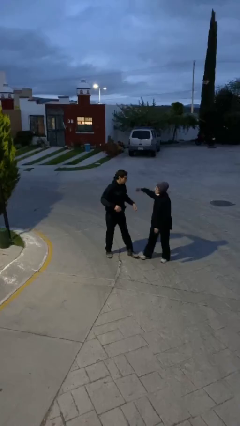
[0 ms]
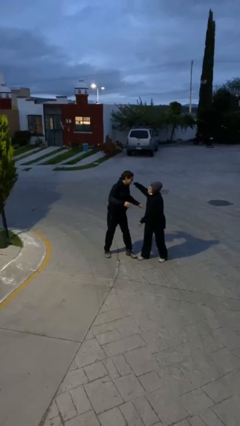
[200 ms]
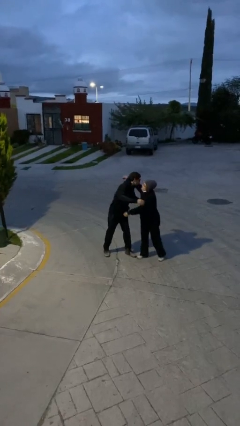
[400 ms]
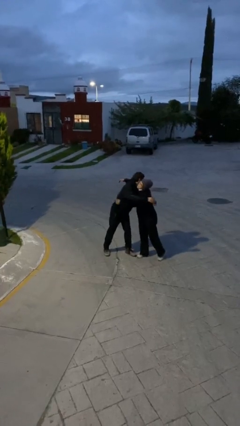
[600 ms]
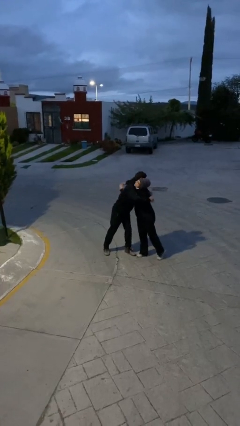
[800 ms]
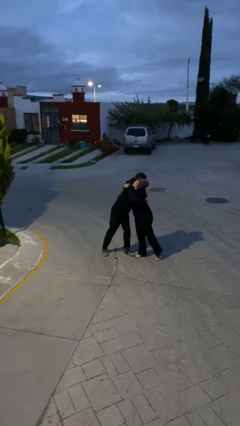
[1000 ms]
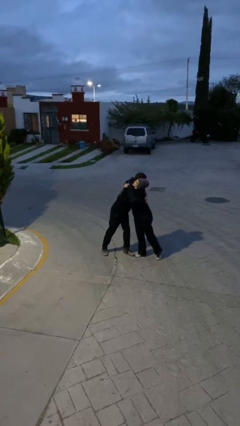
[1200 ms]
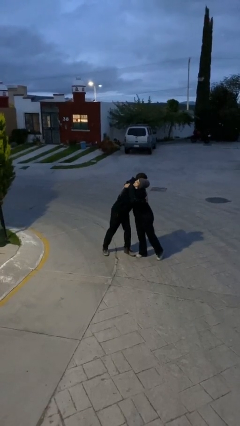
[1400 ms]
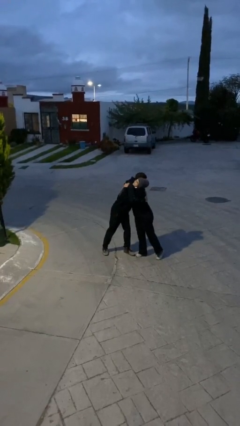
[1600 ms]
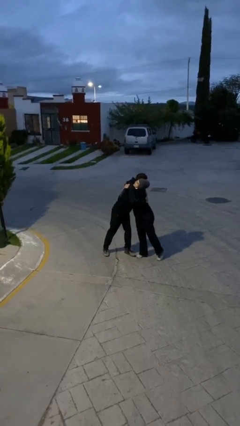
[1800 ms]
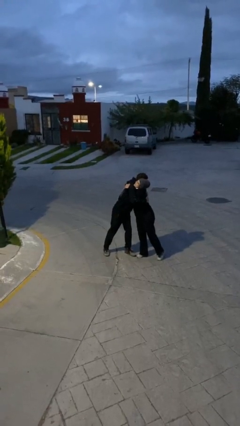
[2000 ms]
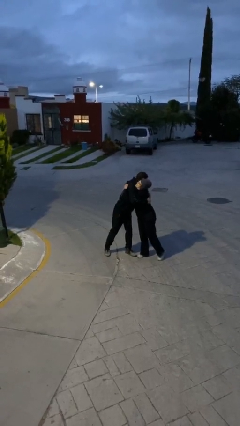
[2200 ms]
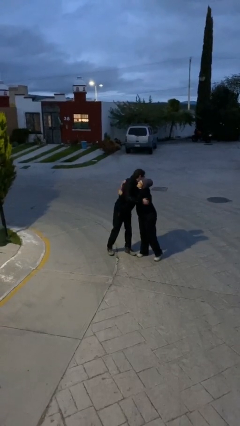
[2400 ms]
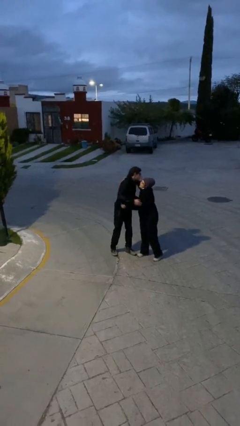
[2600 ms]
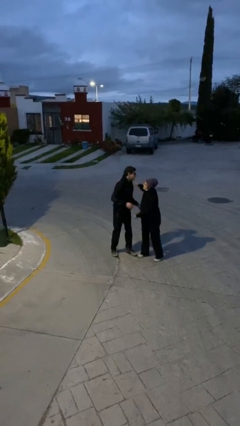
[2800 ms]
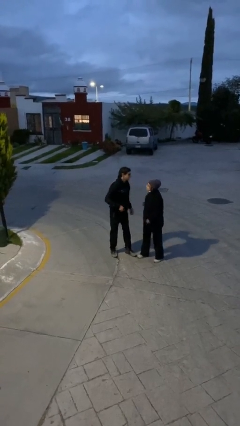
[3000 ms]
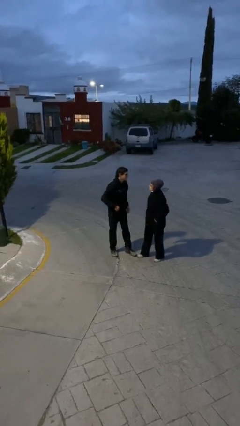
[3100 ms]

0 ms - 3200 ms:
person embraces person

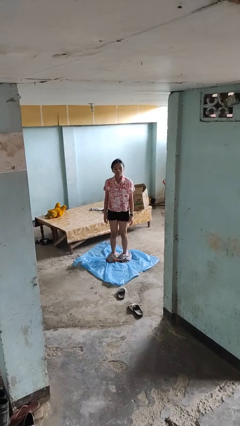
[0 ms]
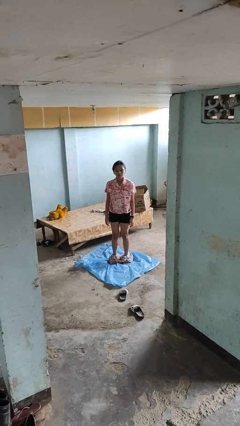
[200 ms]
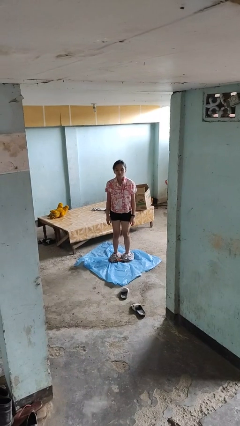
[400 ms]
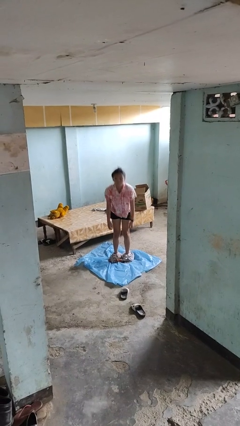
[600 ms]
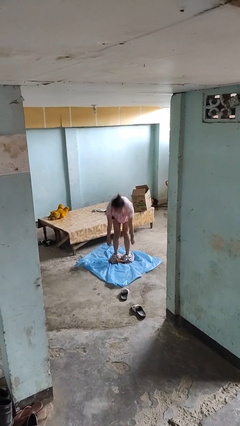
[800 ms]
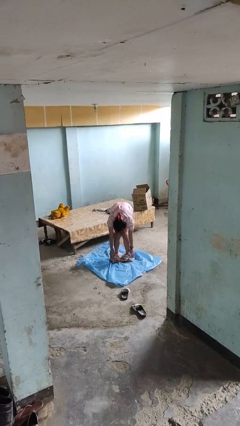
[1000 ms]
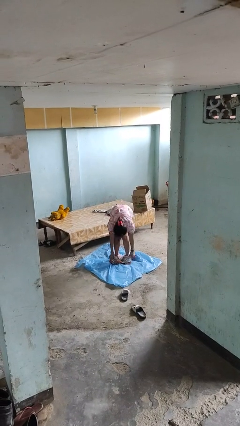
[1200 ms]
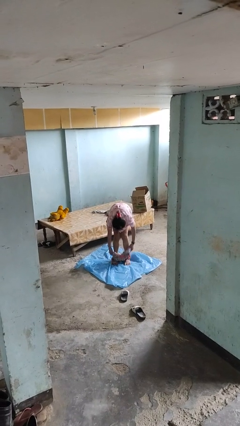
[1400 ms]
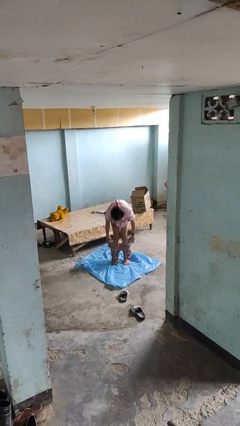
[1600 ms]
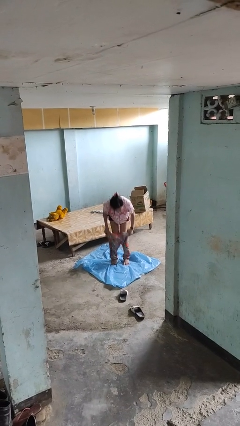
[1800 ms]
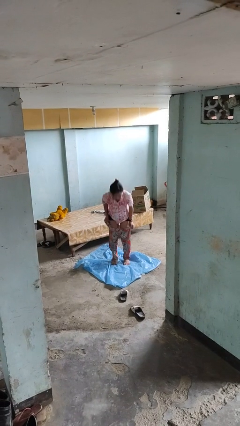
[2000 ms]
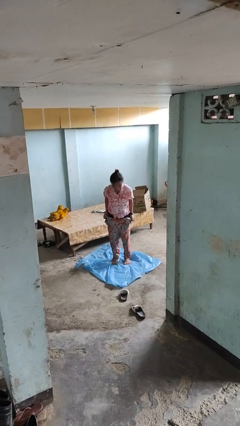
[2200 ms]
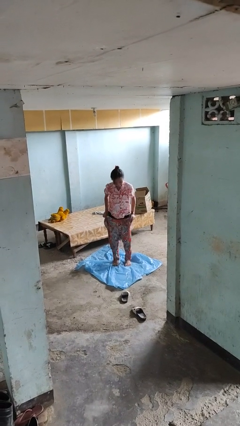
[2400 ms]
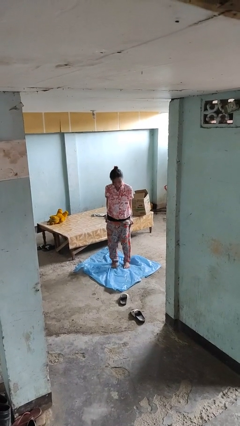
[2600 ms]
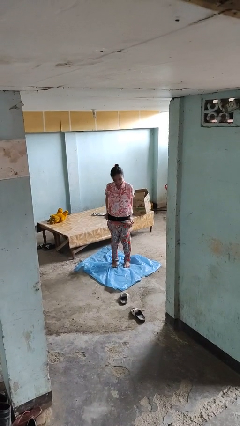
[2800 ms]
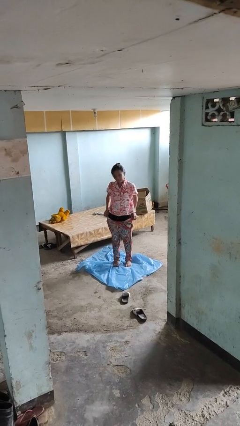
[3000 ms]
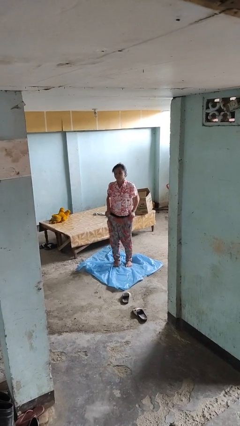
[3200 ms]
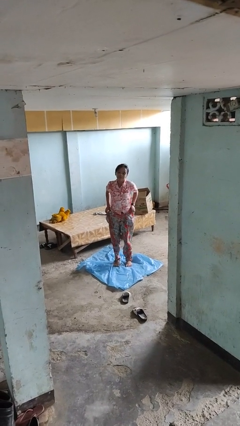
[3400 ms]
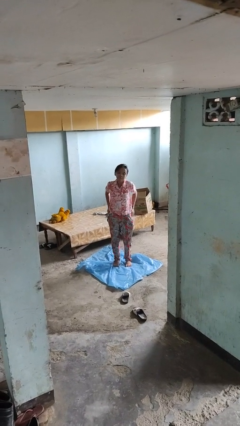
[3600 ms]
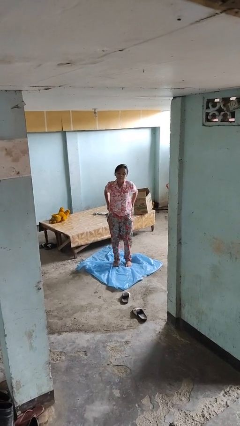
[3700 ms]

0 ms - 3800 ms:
person puts on pants

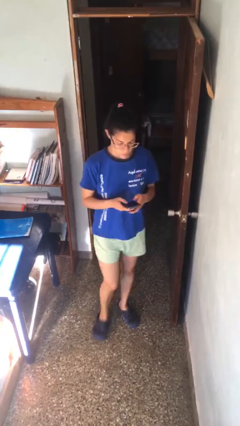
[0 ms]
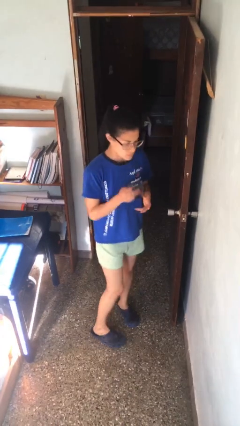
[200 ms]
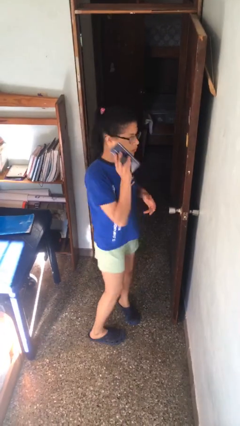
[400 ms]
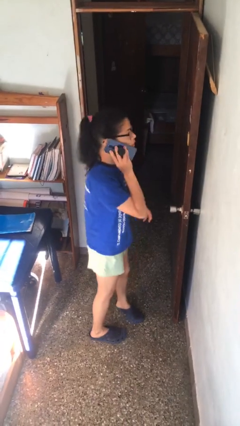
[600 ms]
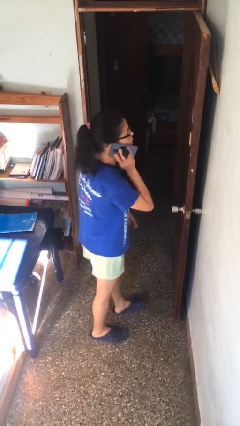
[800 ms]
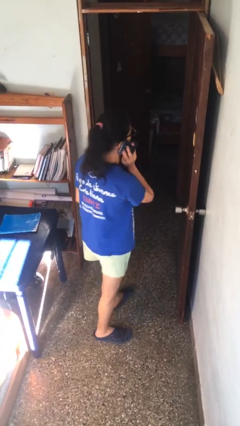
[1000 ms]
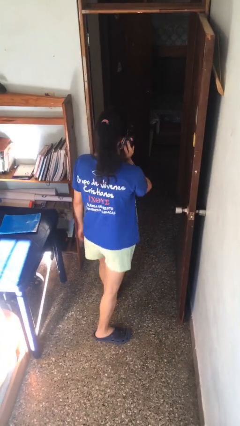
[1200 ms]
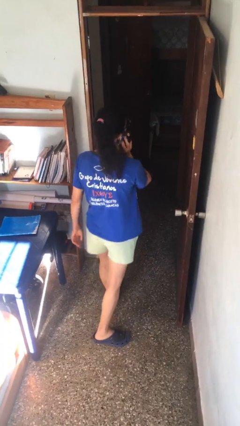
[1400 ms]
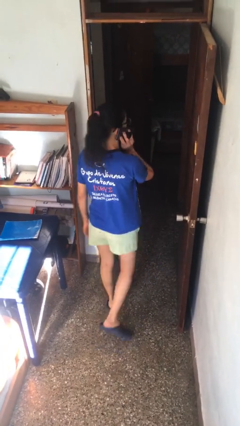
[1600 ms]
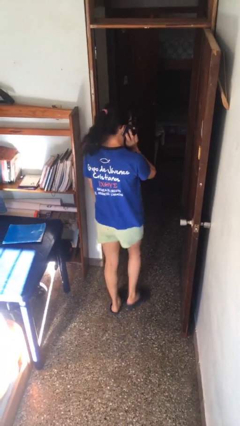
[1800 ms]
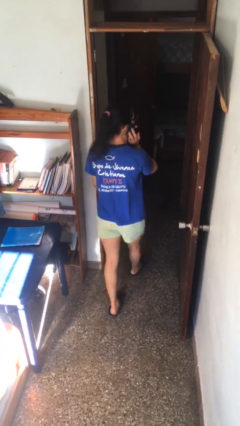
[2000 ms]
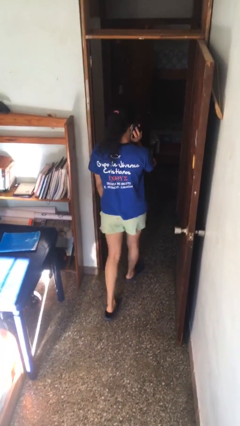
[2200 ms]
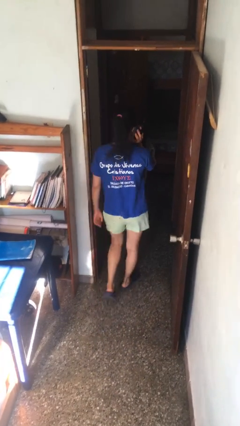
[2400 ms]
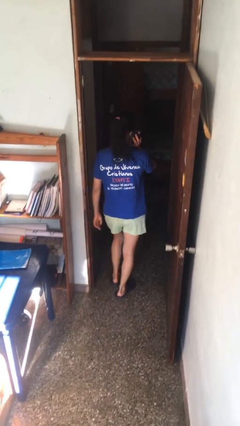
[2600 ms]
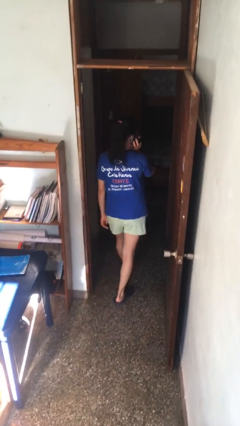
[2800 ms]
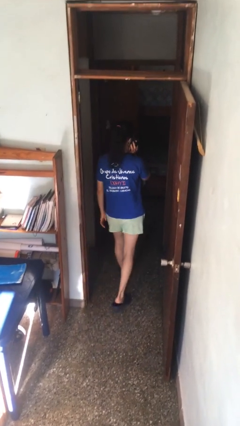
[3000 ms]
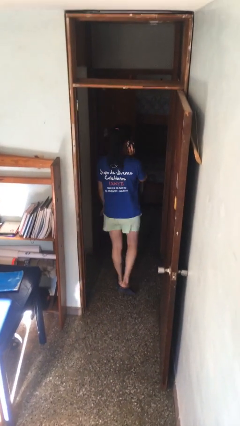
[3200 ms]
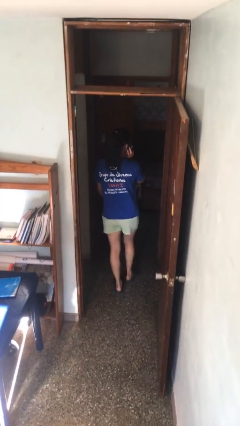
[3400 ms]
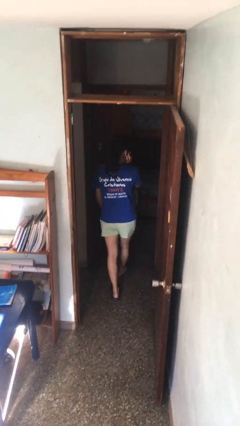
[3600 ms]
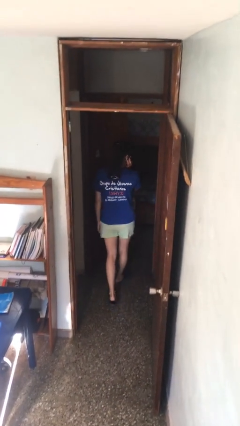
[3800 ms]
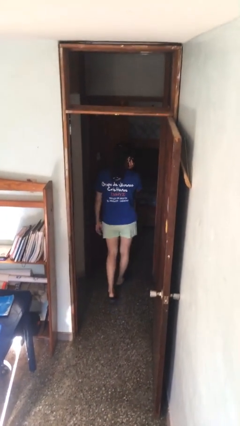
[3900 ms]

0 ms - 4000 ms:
person talks on phone

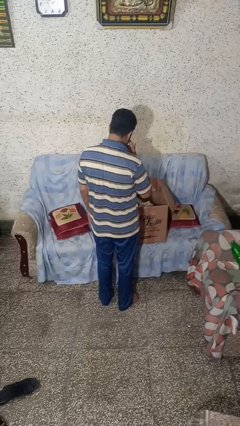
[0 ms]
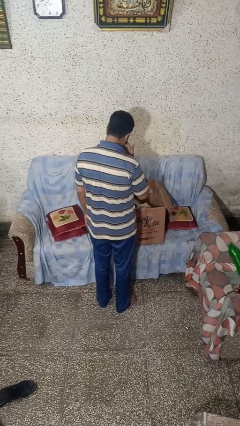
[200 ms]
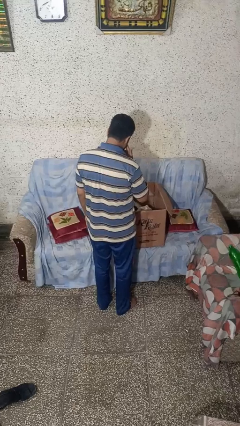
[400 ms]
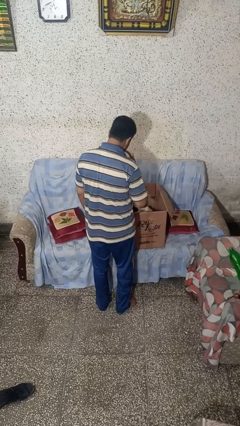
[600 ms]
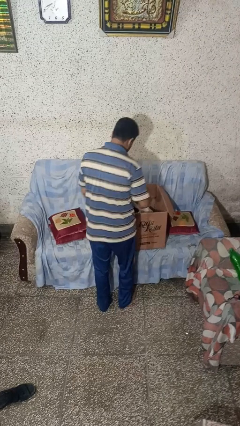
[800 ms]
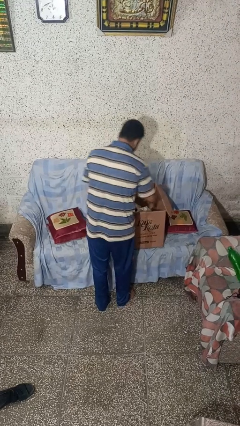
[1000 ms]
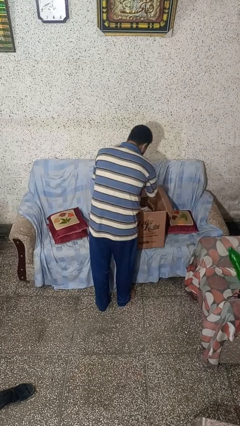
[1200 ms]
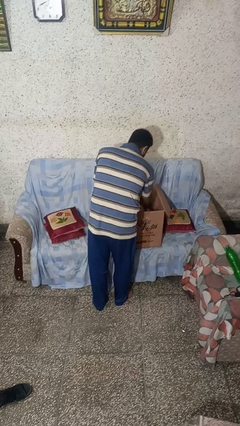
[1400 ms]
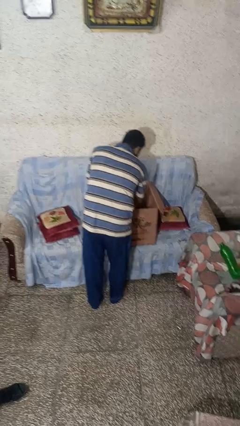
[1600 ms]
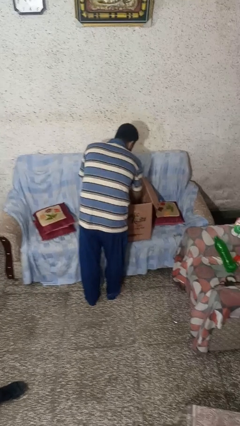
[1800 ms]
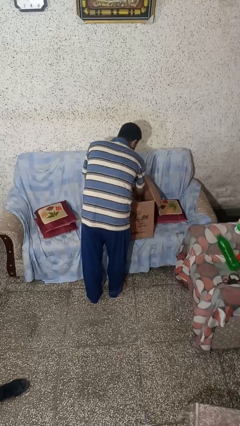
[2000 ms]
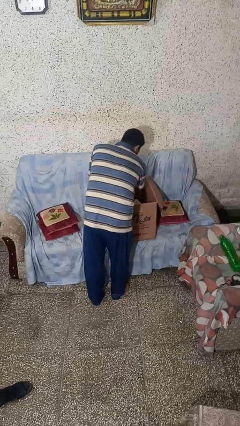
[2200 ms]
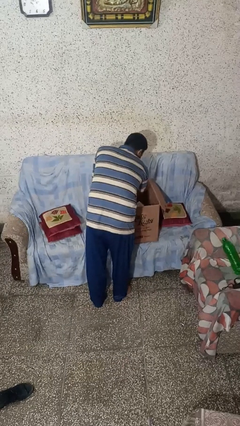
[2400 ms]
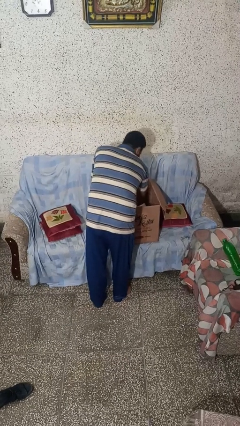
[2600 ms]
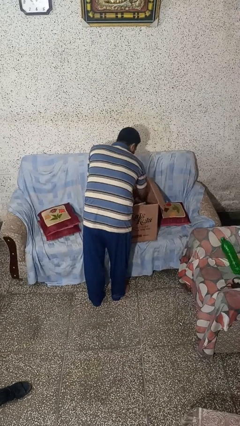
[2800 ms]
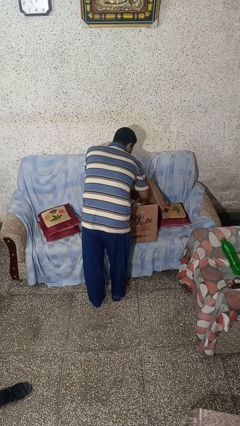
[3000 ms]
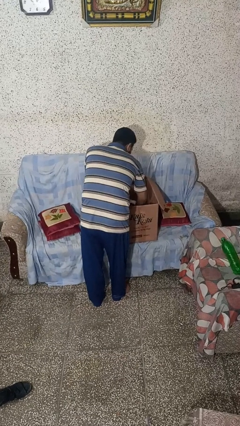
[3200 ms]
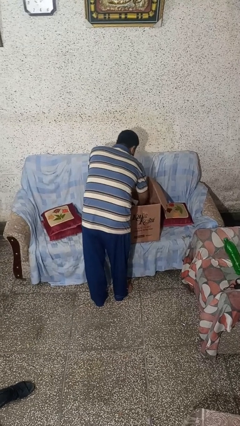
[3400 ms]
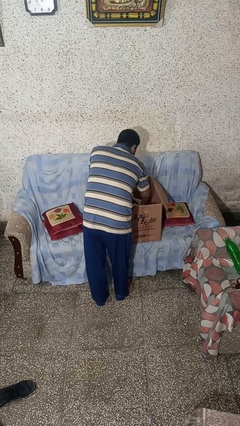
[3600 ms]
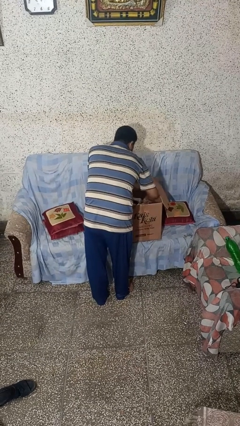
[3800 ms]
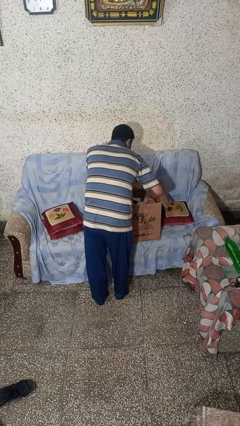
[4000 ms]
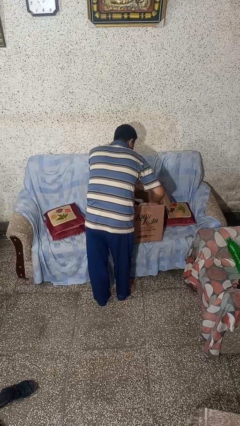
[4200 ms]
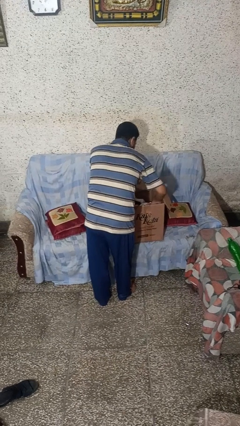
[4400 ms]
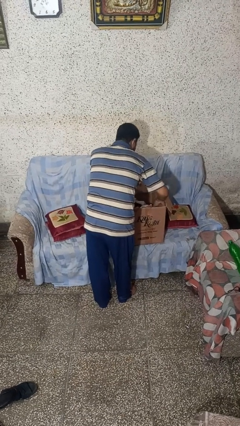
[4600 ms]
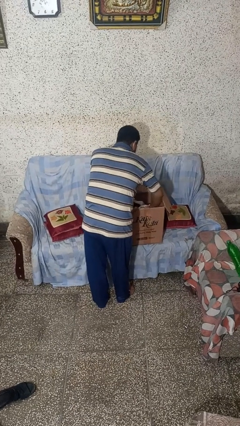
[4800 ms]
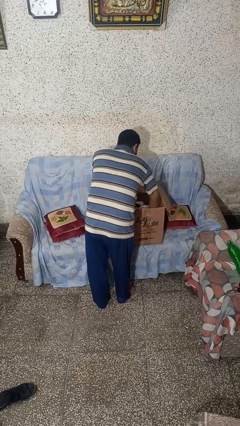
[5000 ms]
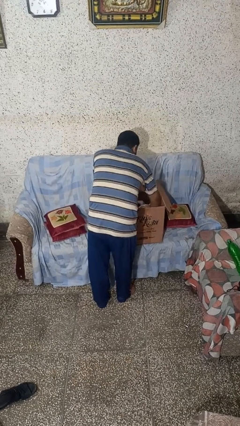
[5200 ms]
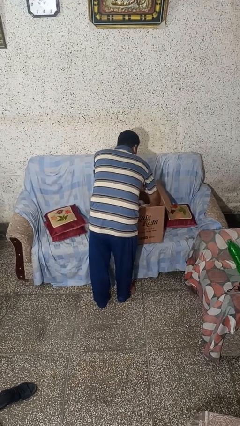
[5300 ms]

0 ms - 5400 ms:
person searches in box

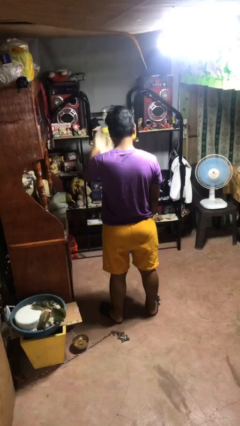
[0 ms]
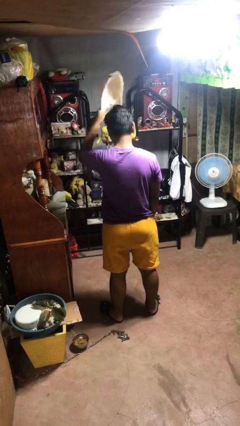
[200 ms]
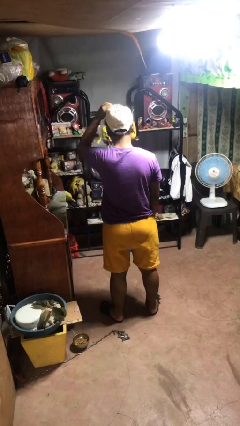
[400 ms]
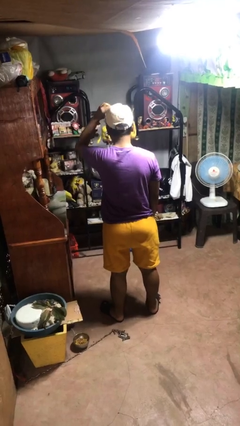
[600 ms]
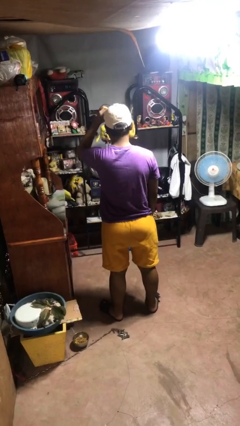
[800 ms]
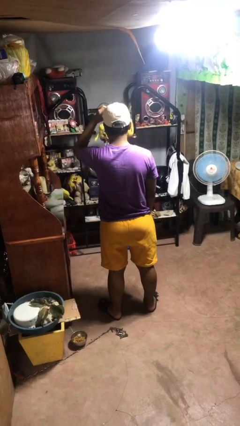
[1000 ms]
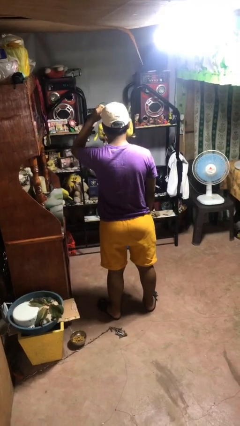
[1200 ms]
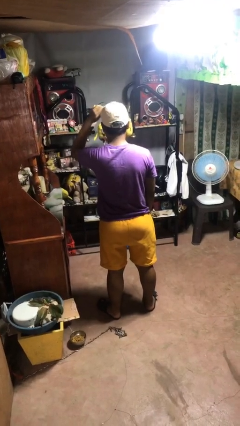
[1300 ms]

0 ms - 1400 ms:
person puts on hat
